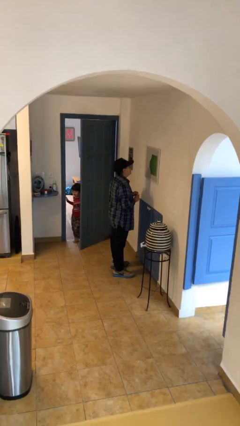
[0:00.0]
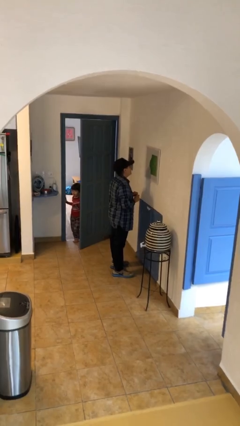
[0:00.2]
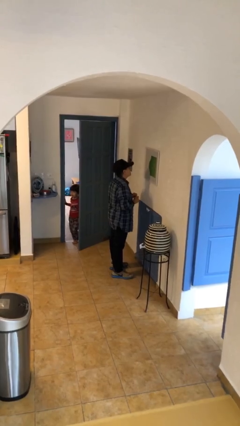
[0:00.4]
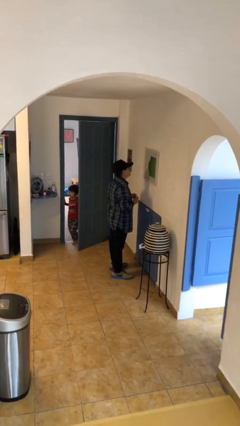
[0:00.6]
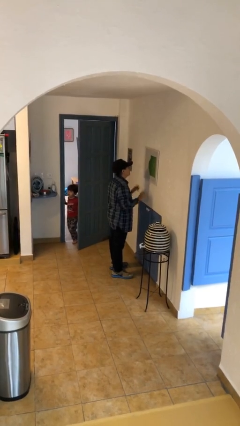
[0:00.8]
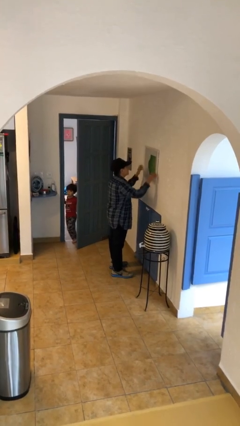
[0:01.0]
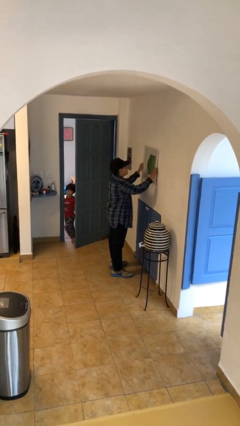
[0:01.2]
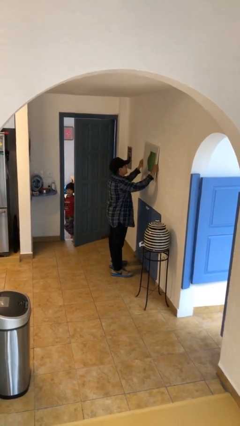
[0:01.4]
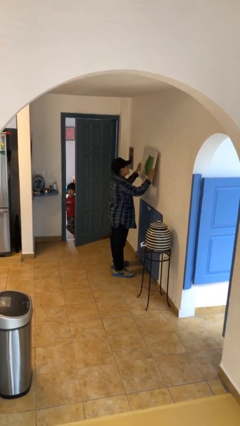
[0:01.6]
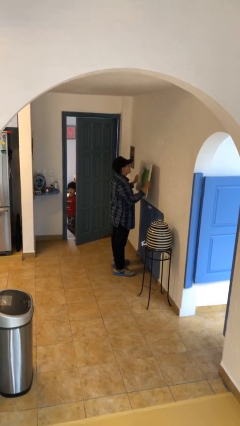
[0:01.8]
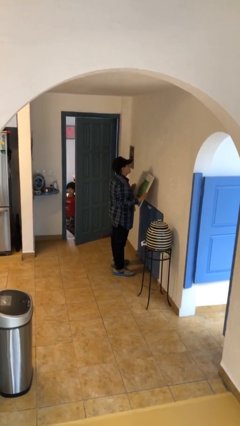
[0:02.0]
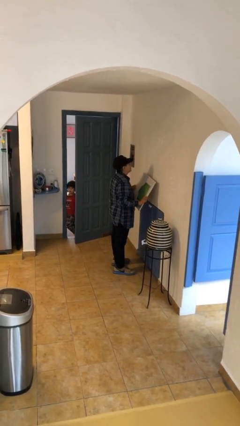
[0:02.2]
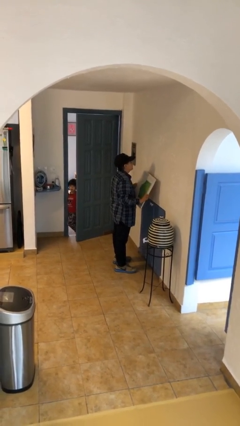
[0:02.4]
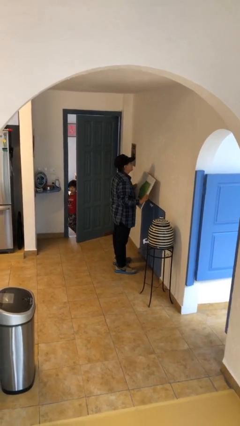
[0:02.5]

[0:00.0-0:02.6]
person takes down picture frame

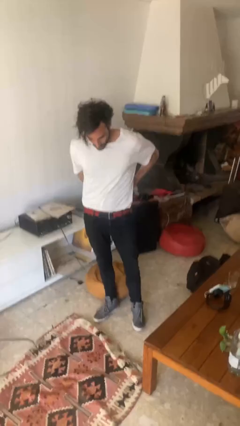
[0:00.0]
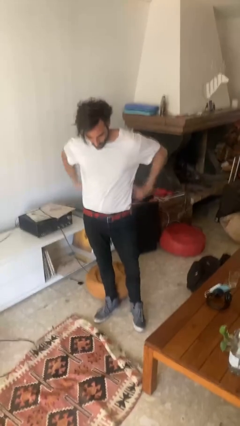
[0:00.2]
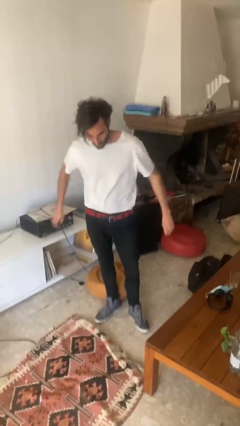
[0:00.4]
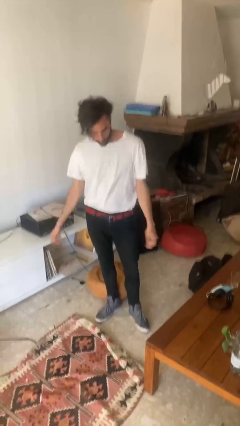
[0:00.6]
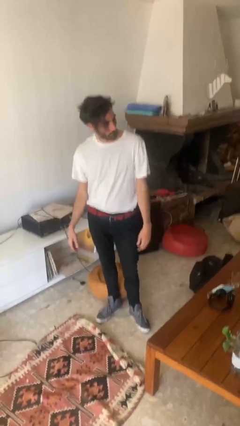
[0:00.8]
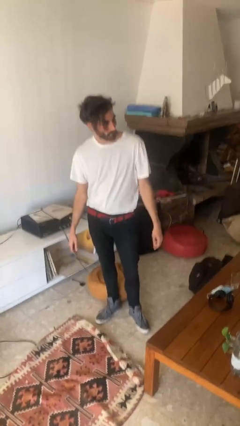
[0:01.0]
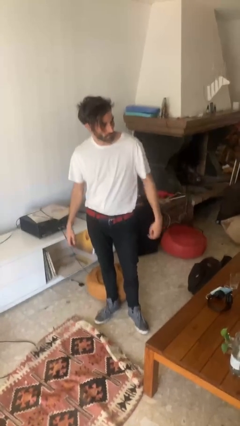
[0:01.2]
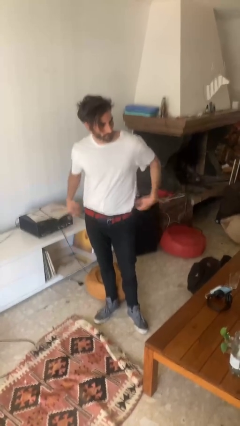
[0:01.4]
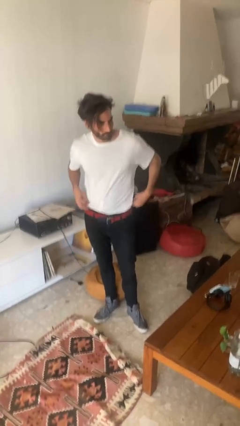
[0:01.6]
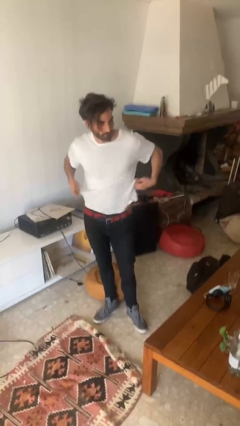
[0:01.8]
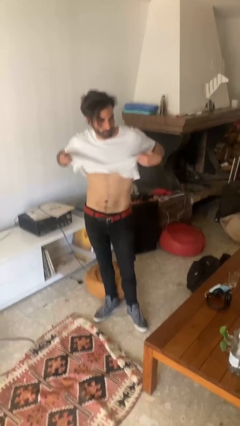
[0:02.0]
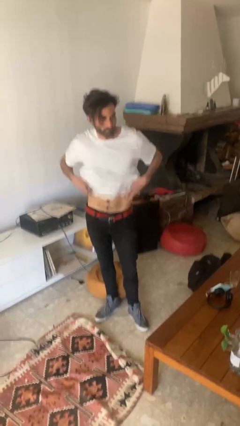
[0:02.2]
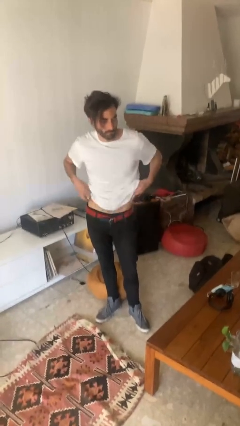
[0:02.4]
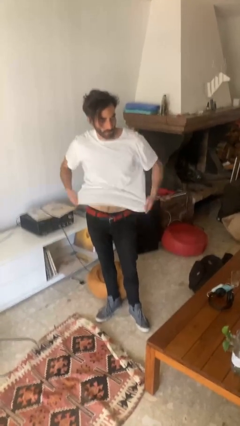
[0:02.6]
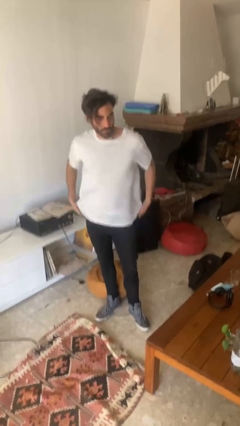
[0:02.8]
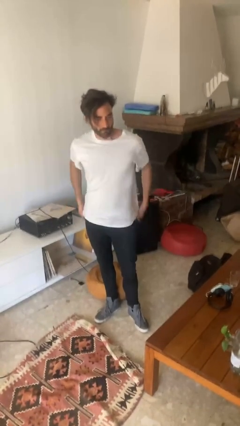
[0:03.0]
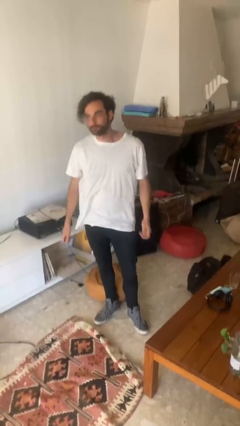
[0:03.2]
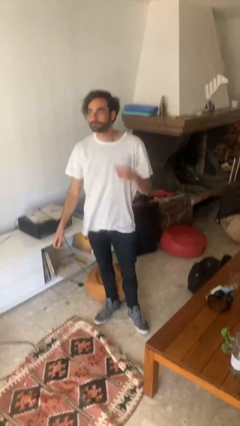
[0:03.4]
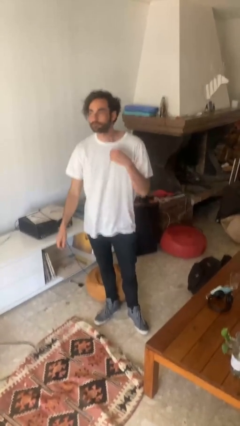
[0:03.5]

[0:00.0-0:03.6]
person untucks shirt

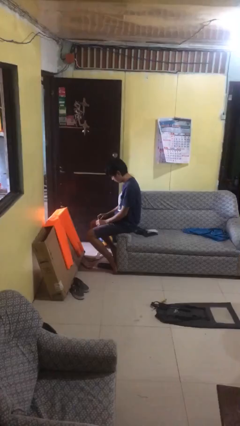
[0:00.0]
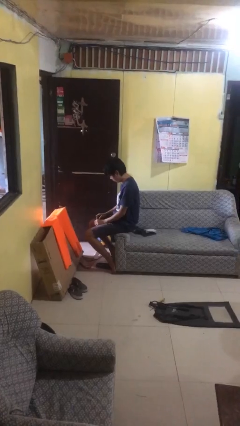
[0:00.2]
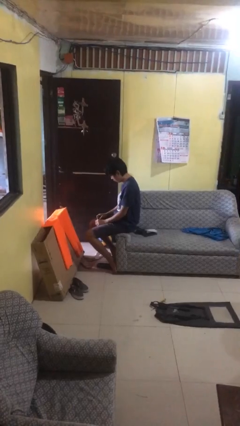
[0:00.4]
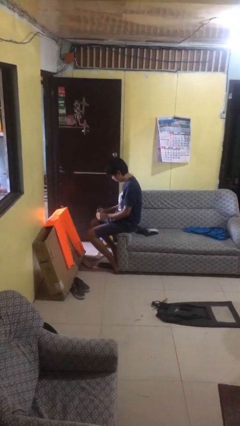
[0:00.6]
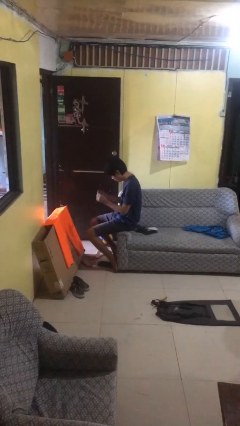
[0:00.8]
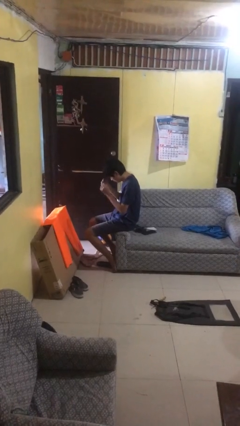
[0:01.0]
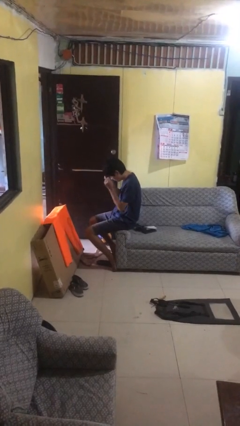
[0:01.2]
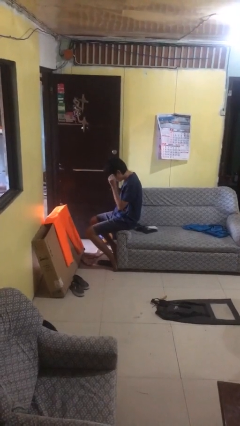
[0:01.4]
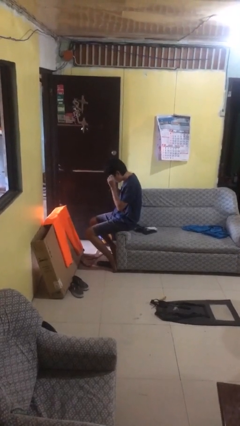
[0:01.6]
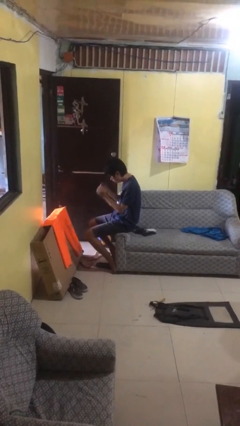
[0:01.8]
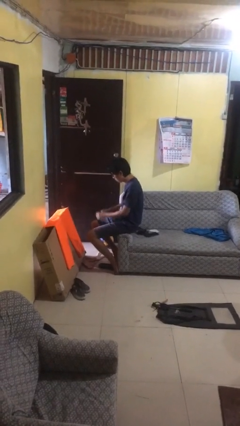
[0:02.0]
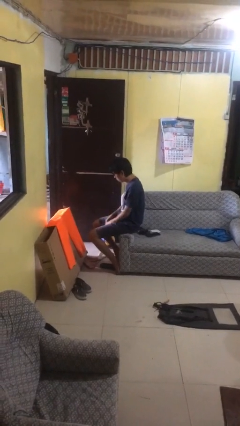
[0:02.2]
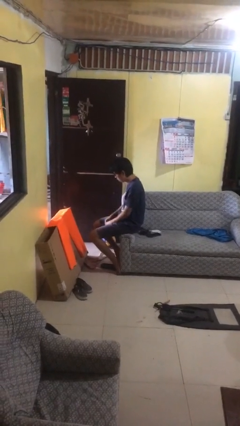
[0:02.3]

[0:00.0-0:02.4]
person puts on glasses

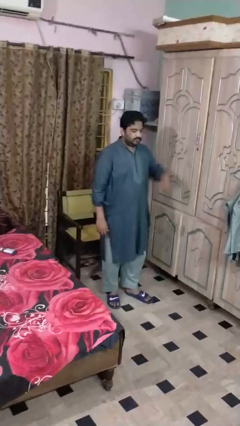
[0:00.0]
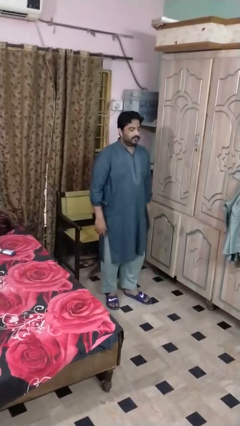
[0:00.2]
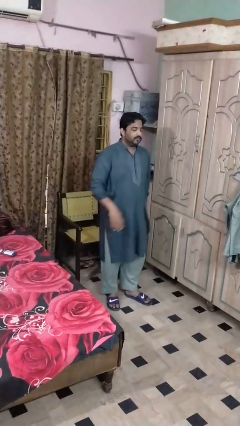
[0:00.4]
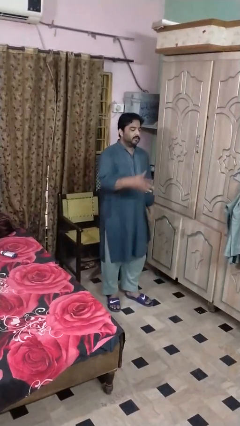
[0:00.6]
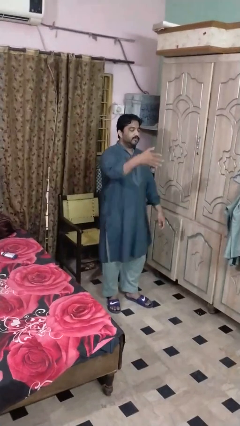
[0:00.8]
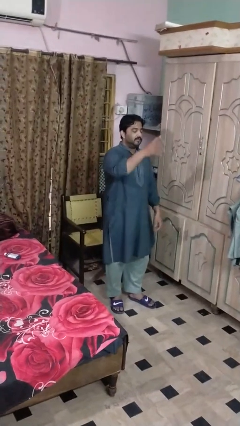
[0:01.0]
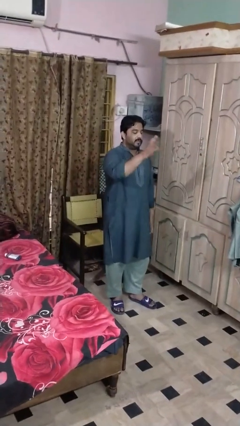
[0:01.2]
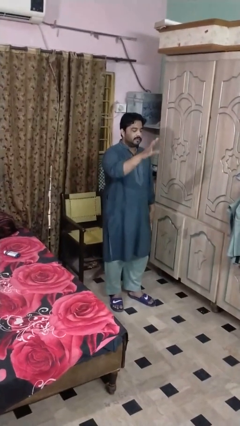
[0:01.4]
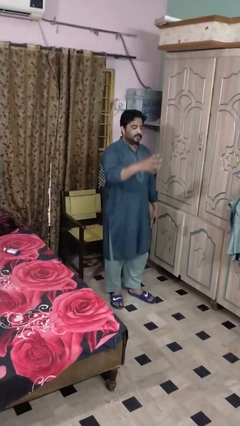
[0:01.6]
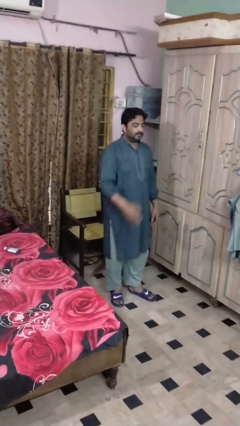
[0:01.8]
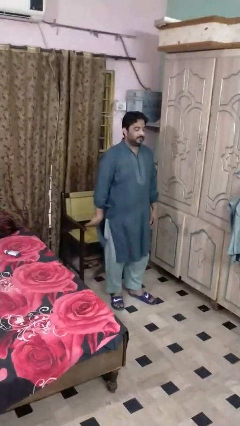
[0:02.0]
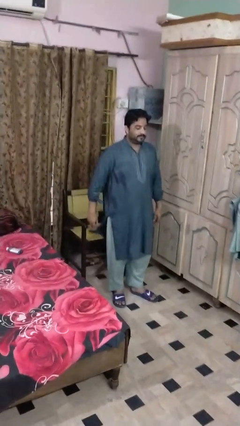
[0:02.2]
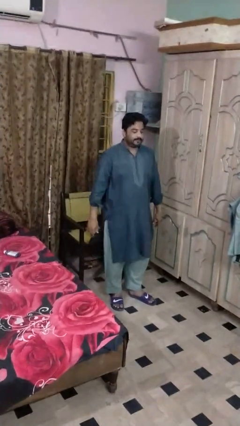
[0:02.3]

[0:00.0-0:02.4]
person shakes head

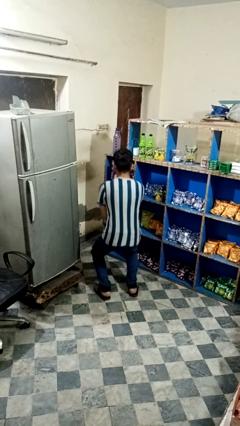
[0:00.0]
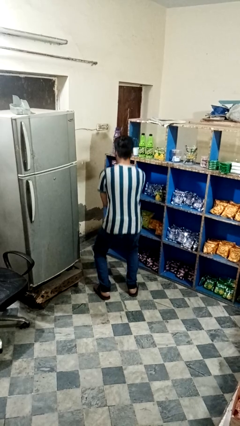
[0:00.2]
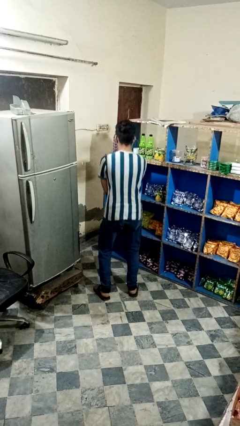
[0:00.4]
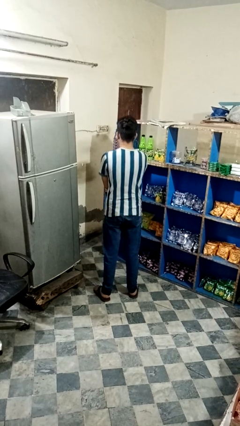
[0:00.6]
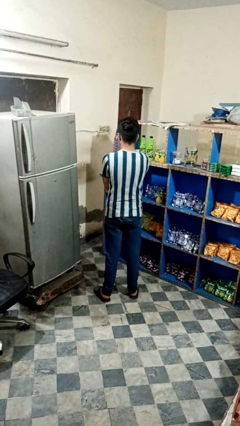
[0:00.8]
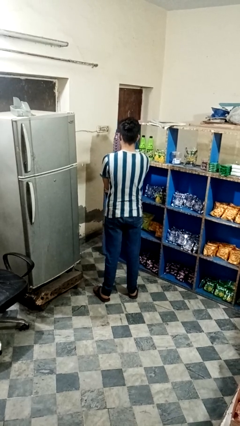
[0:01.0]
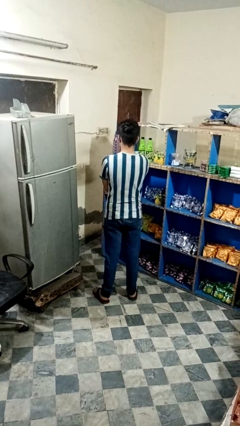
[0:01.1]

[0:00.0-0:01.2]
person stands up

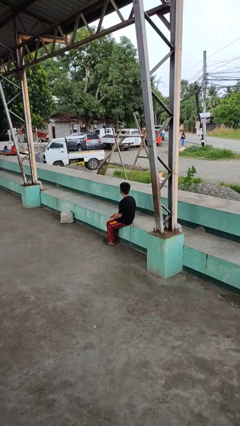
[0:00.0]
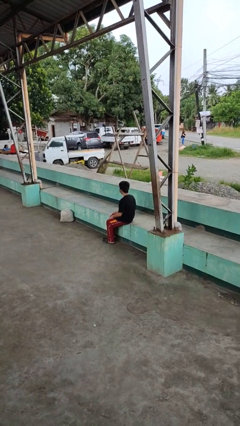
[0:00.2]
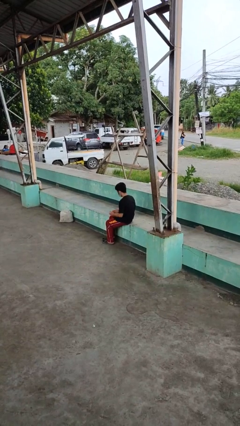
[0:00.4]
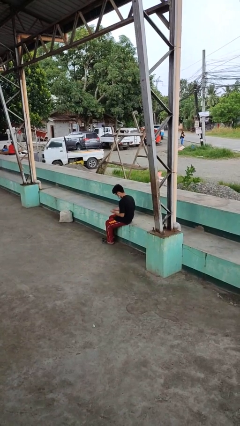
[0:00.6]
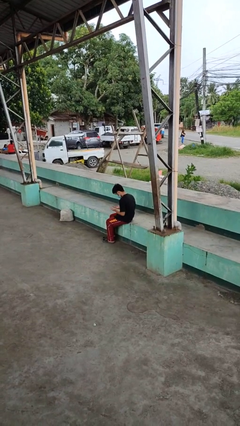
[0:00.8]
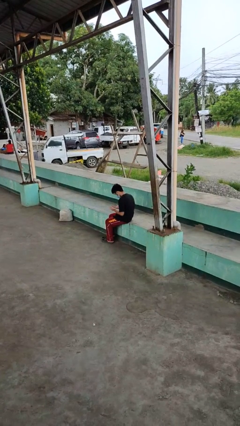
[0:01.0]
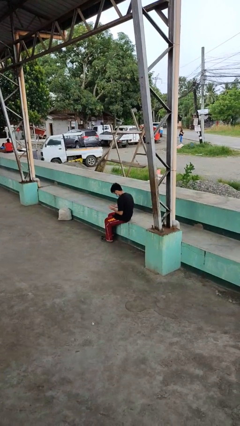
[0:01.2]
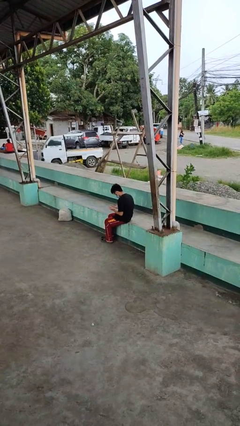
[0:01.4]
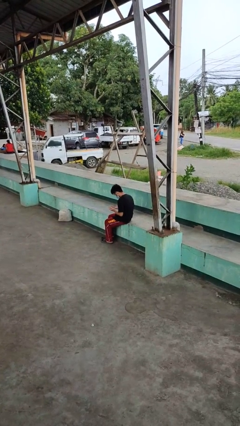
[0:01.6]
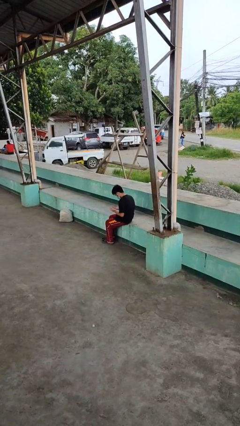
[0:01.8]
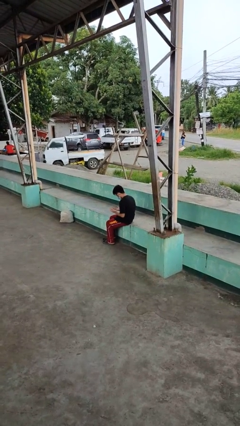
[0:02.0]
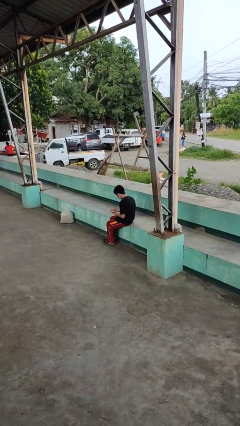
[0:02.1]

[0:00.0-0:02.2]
person looks at hands in lap

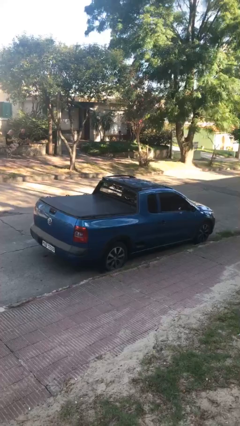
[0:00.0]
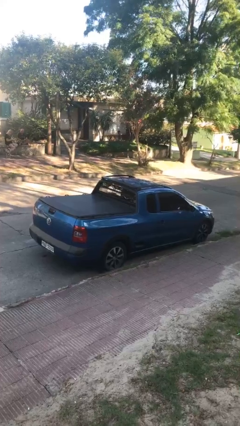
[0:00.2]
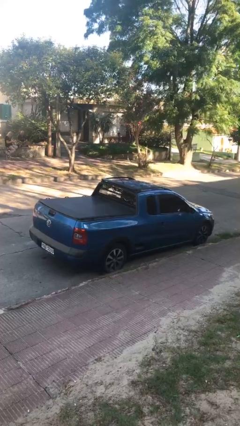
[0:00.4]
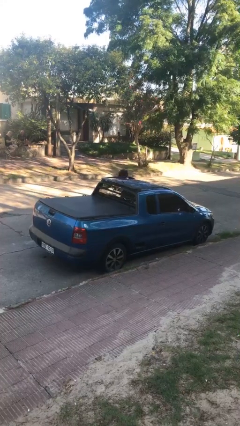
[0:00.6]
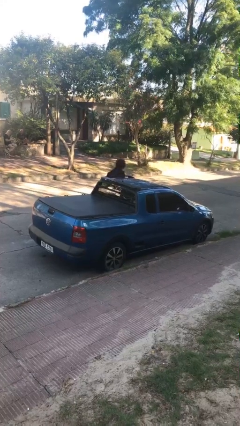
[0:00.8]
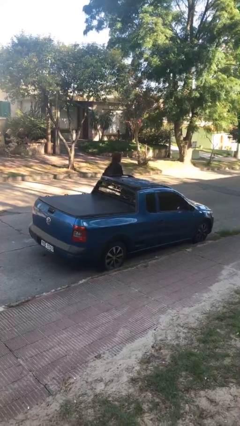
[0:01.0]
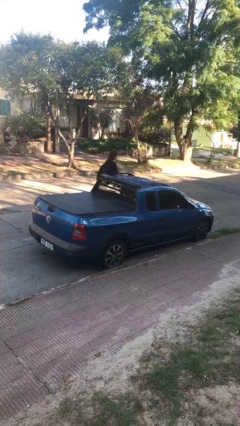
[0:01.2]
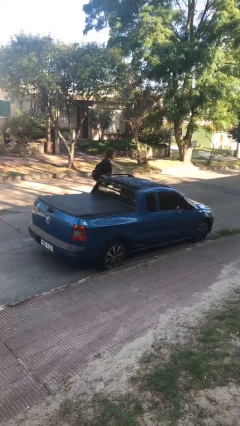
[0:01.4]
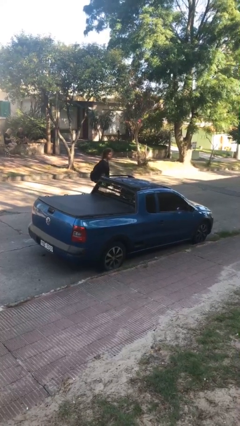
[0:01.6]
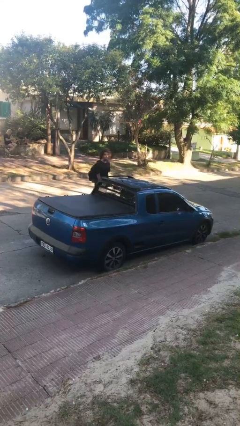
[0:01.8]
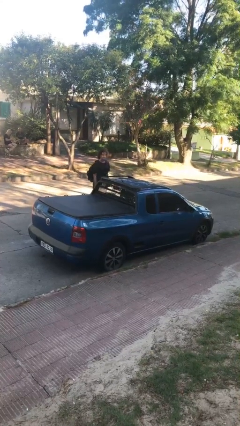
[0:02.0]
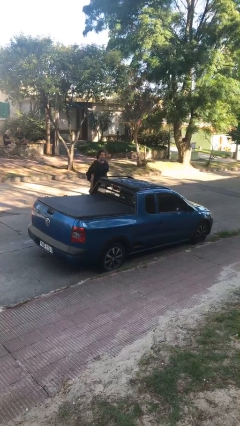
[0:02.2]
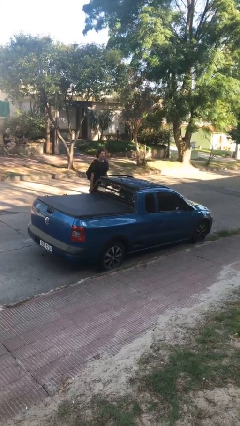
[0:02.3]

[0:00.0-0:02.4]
car drops off person

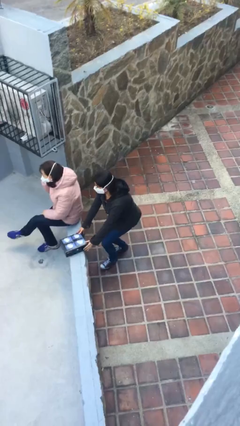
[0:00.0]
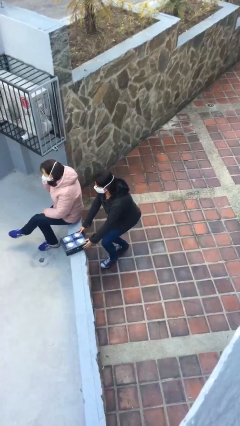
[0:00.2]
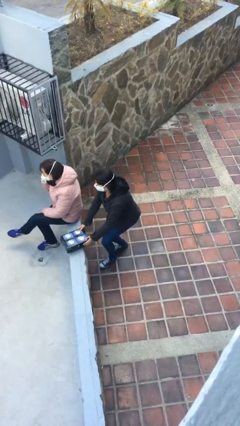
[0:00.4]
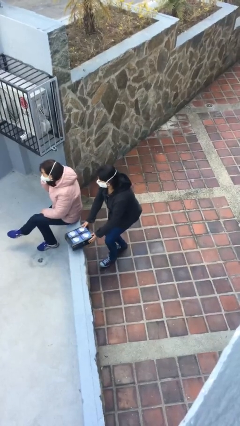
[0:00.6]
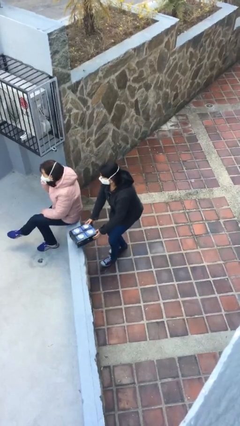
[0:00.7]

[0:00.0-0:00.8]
person steals object from person
